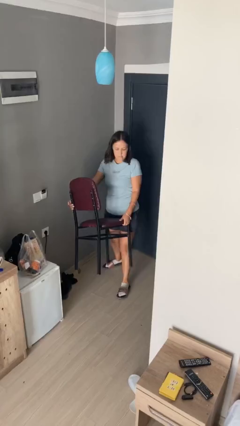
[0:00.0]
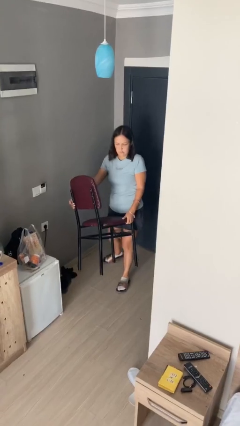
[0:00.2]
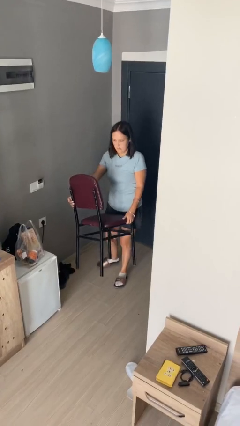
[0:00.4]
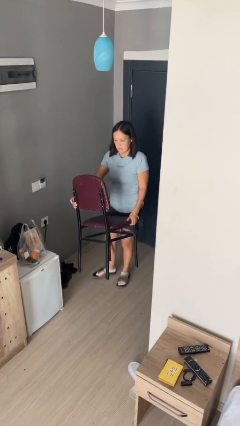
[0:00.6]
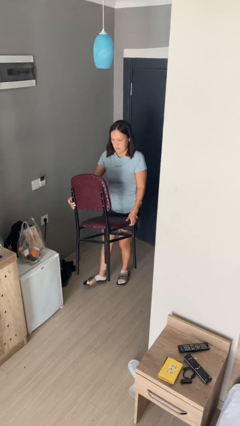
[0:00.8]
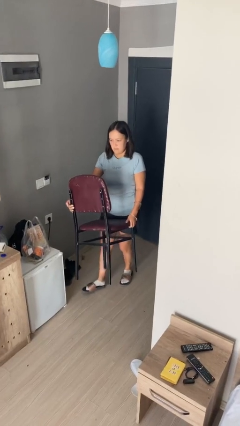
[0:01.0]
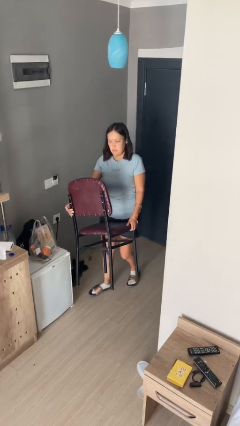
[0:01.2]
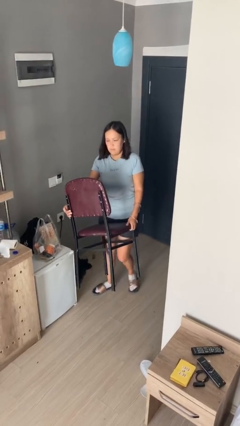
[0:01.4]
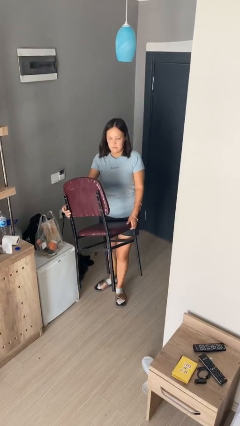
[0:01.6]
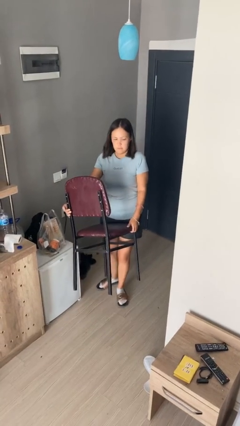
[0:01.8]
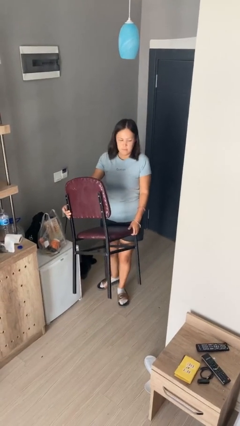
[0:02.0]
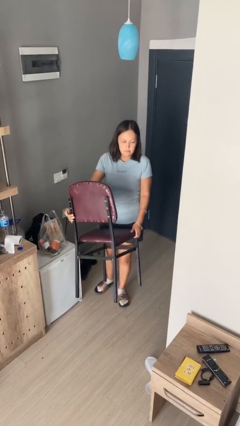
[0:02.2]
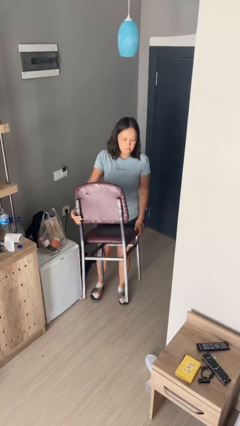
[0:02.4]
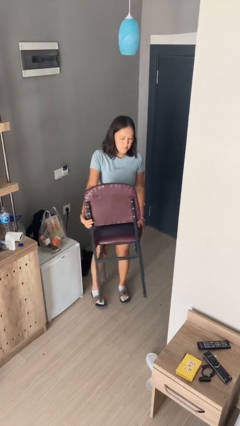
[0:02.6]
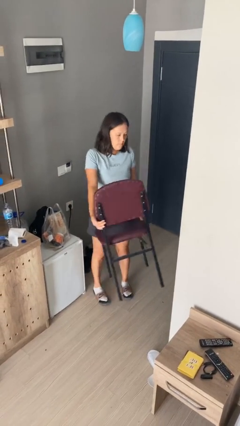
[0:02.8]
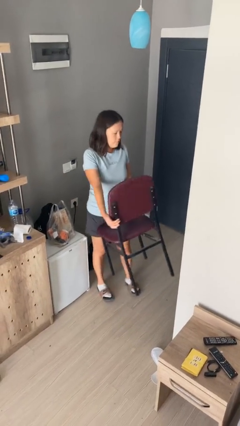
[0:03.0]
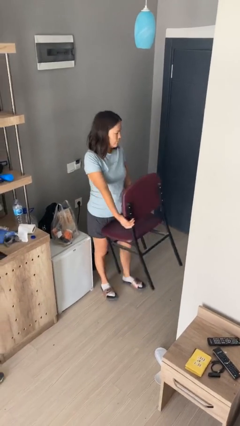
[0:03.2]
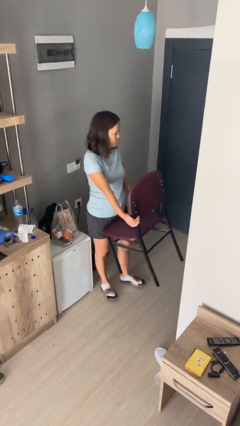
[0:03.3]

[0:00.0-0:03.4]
person carries furniture

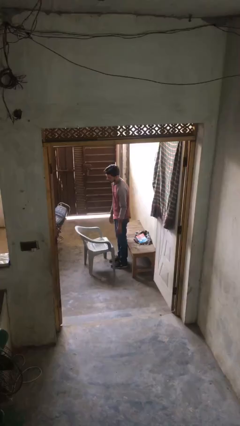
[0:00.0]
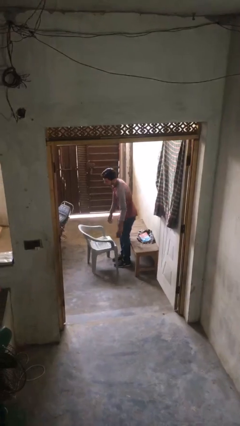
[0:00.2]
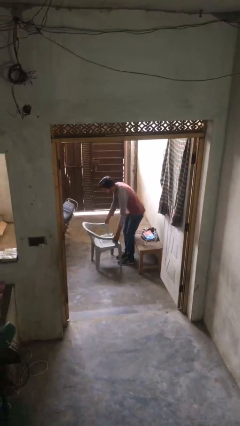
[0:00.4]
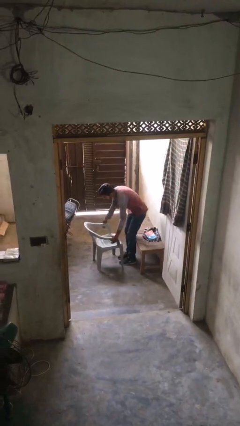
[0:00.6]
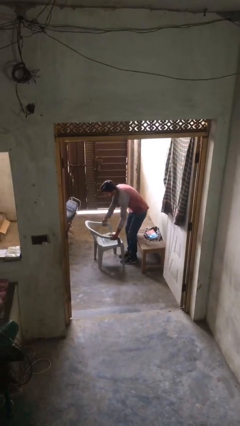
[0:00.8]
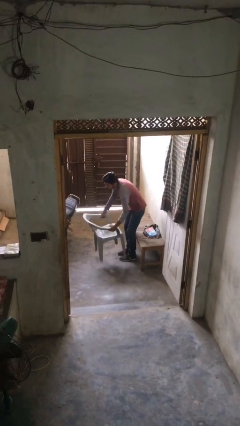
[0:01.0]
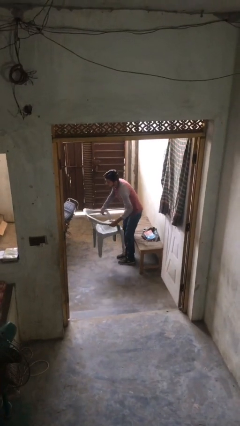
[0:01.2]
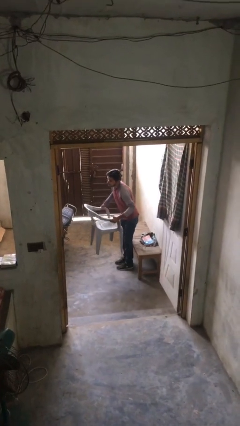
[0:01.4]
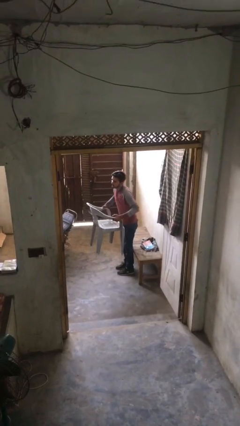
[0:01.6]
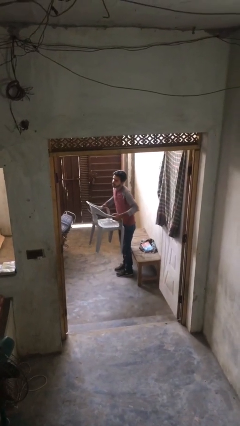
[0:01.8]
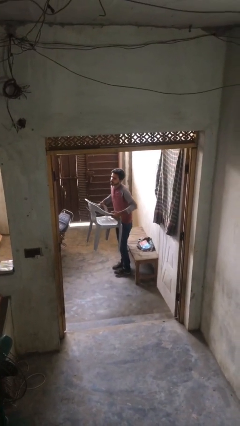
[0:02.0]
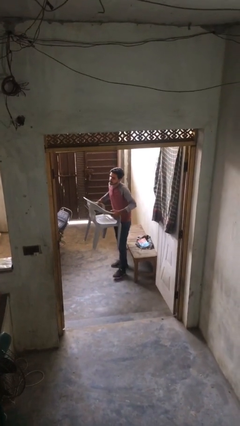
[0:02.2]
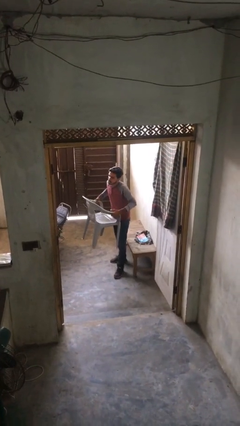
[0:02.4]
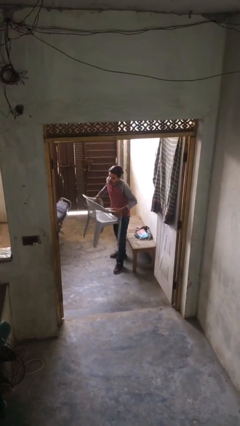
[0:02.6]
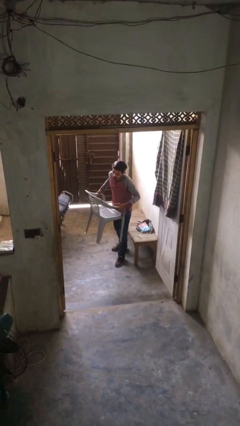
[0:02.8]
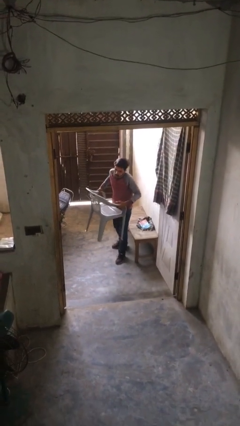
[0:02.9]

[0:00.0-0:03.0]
person picks up object from floor

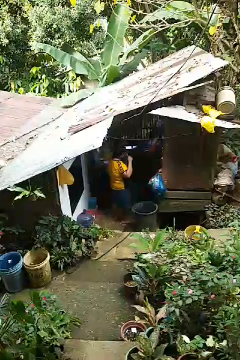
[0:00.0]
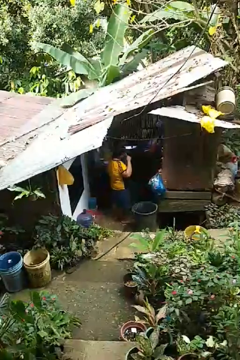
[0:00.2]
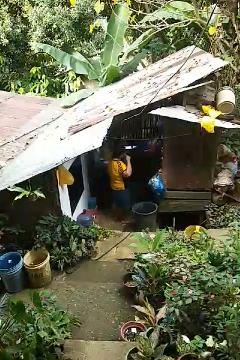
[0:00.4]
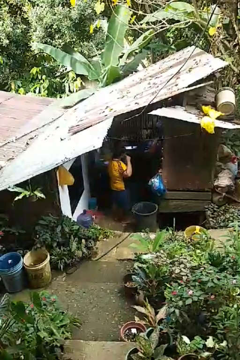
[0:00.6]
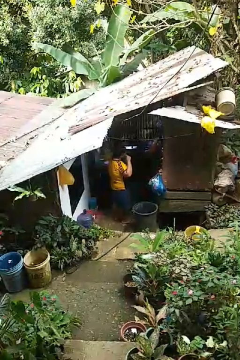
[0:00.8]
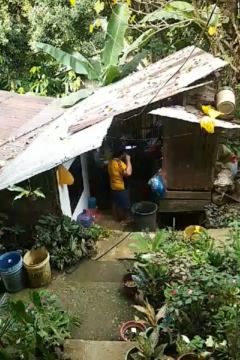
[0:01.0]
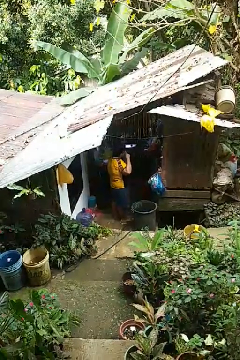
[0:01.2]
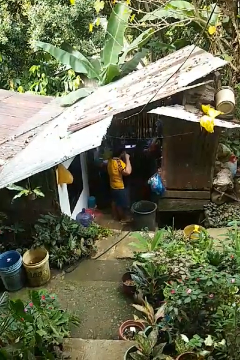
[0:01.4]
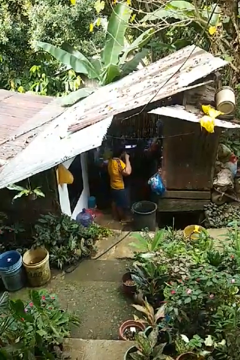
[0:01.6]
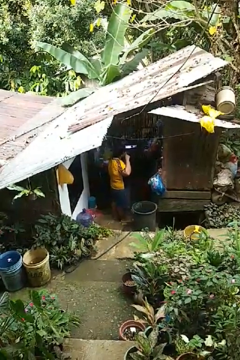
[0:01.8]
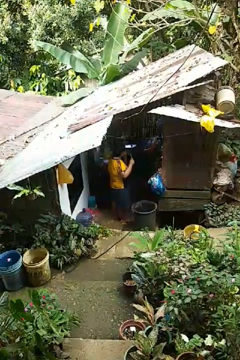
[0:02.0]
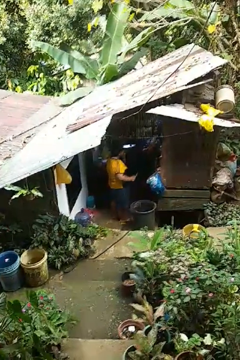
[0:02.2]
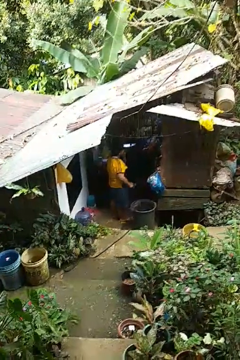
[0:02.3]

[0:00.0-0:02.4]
person brushes teeth

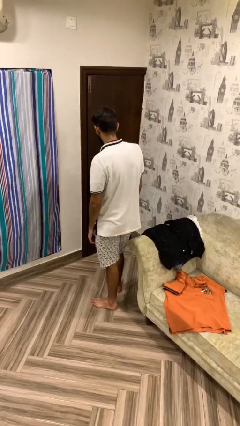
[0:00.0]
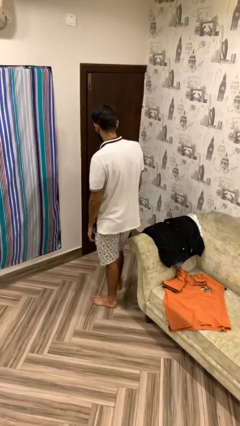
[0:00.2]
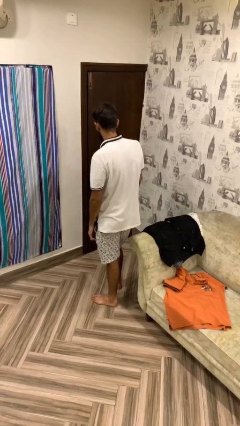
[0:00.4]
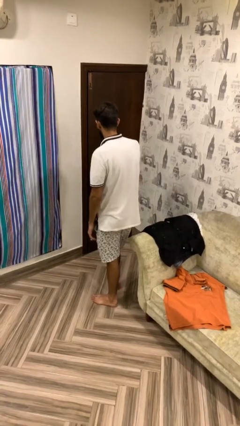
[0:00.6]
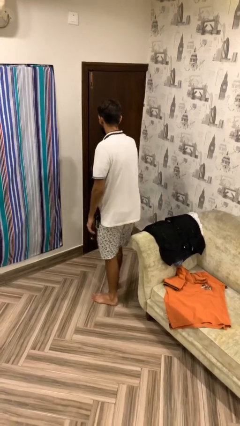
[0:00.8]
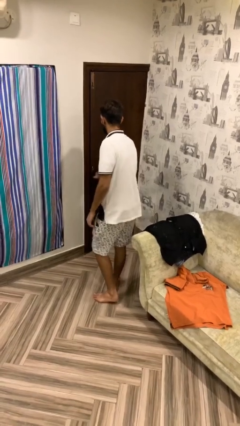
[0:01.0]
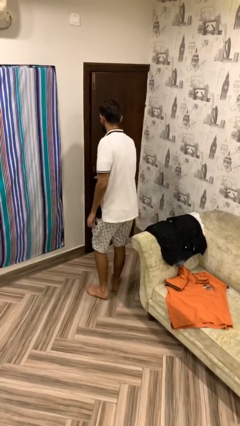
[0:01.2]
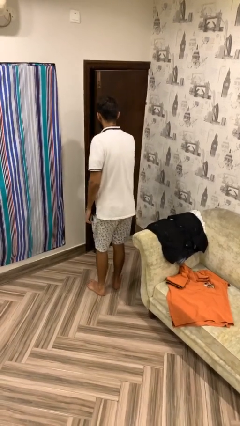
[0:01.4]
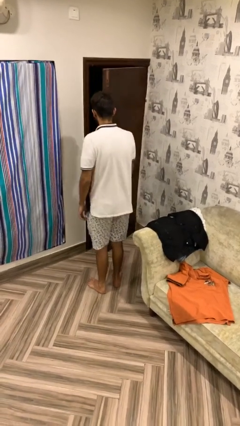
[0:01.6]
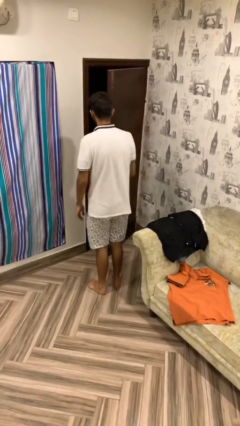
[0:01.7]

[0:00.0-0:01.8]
person opens facility door

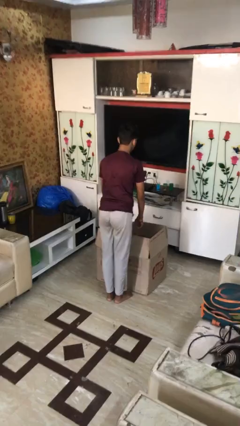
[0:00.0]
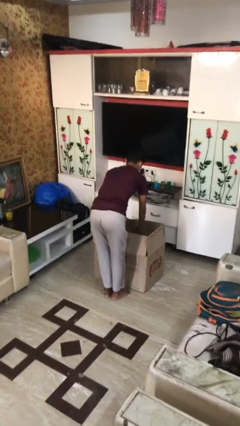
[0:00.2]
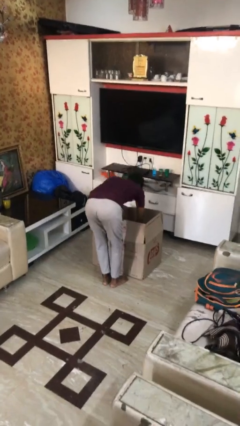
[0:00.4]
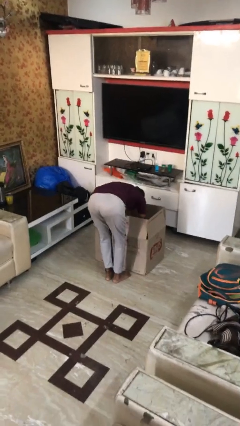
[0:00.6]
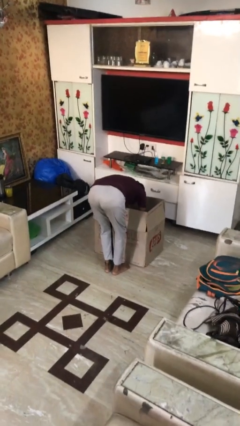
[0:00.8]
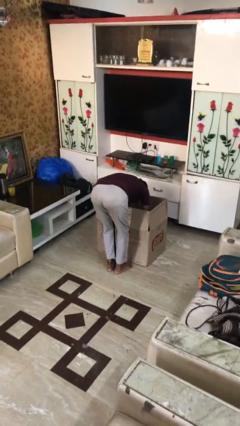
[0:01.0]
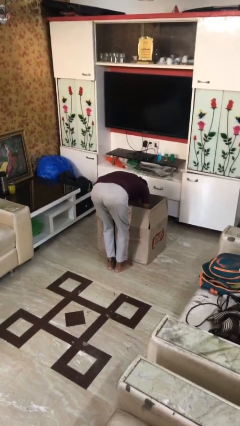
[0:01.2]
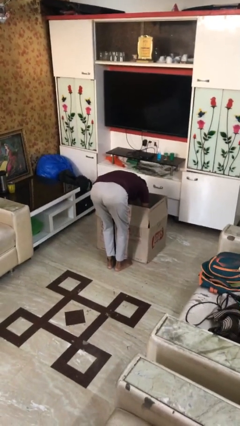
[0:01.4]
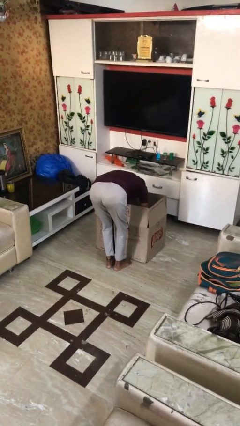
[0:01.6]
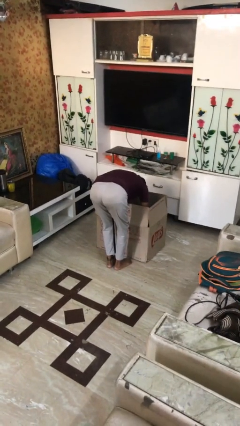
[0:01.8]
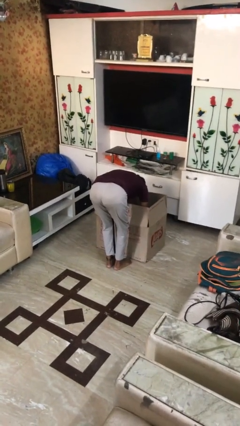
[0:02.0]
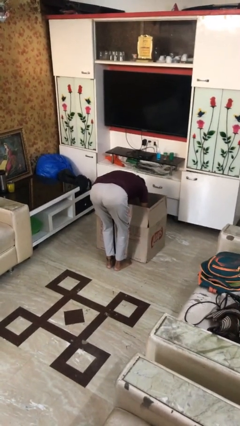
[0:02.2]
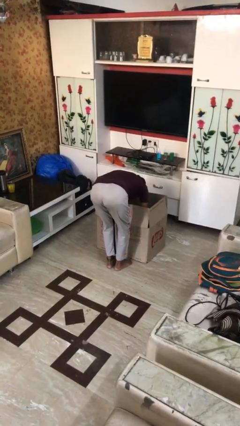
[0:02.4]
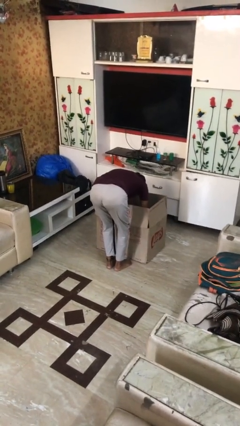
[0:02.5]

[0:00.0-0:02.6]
person searches in box

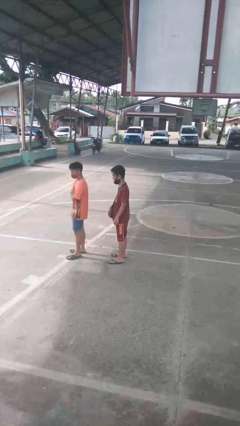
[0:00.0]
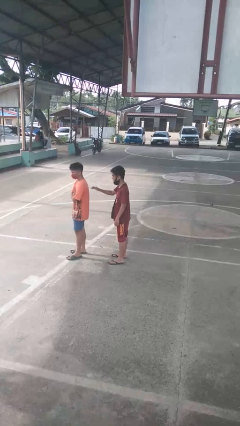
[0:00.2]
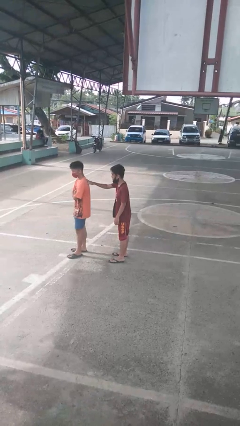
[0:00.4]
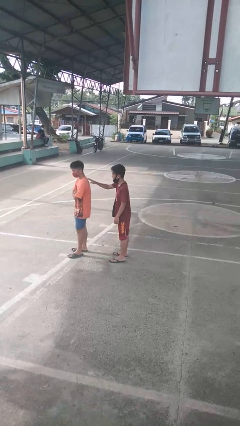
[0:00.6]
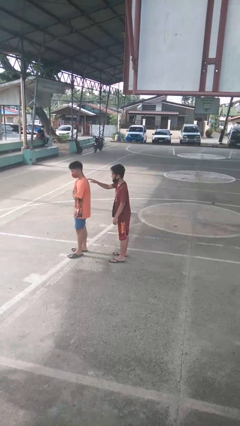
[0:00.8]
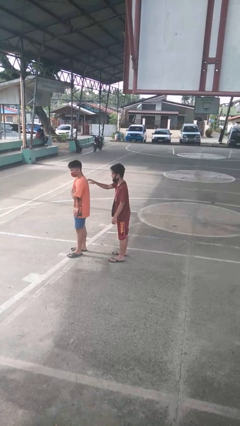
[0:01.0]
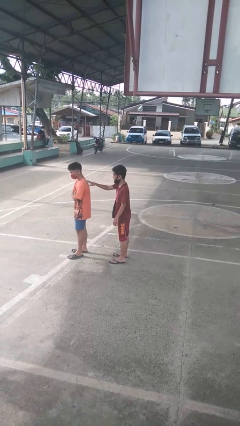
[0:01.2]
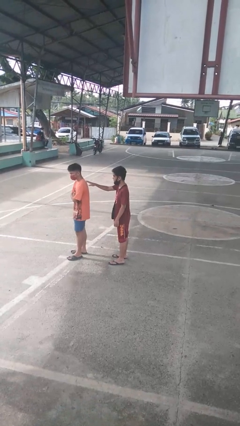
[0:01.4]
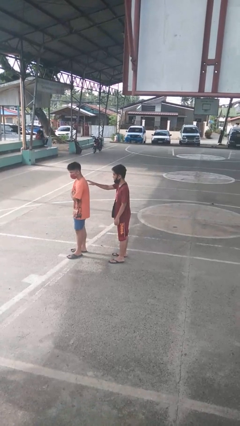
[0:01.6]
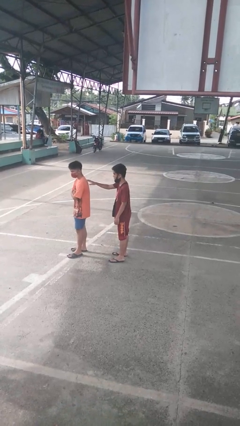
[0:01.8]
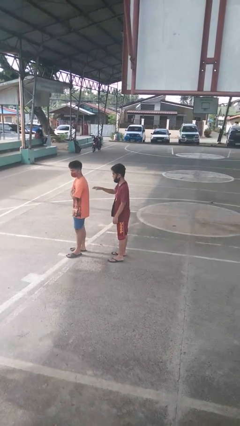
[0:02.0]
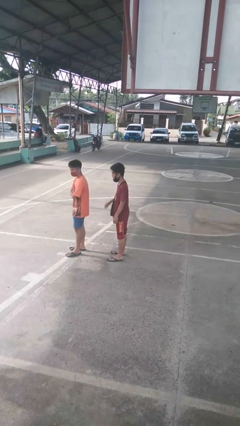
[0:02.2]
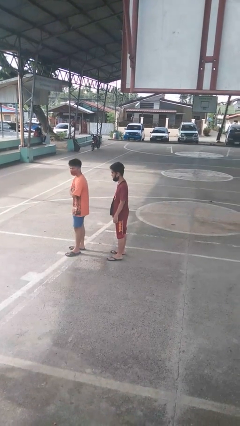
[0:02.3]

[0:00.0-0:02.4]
person touches back of person

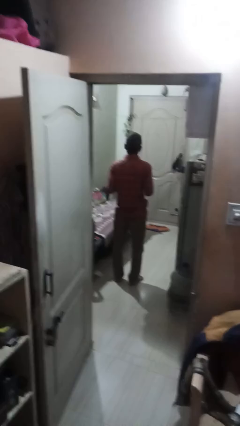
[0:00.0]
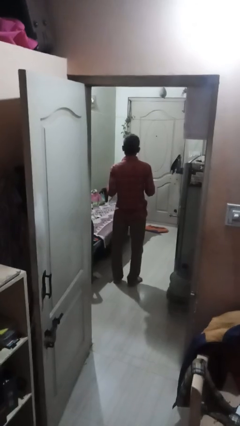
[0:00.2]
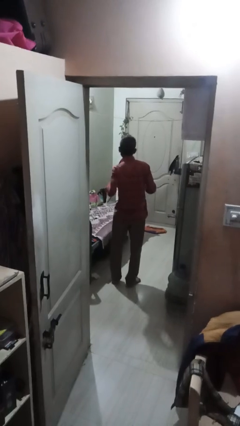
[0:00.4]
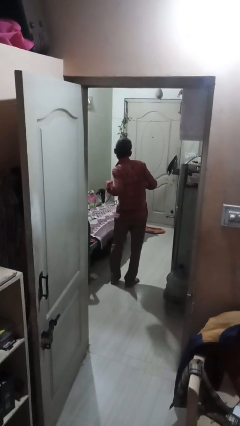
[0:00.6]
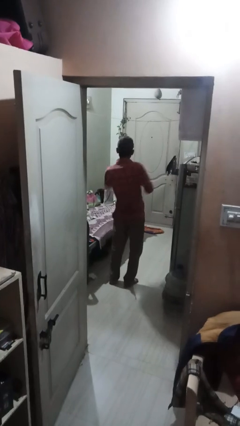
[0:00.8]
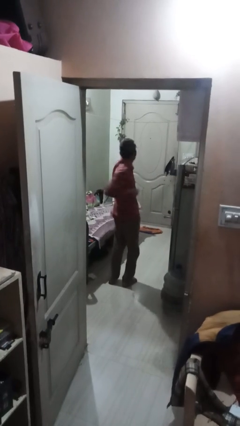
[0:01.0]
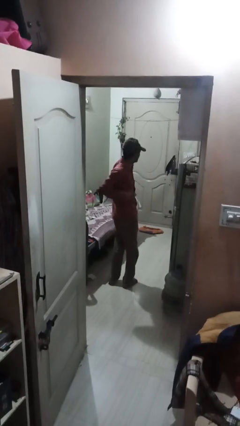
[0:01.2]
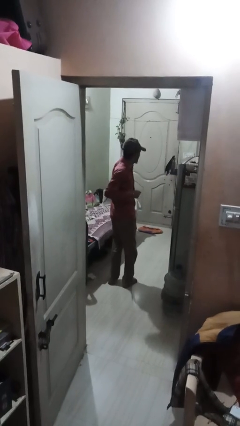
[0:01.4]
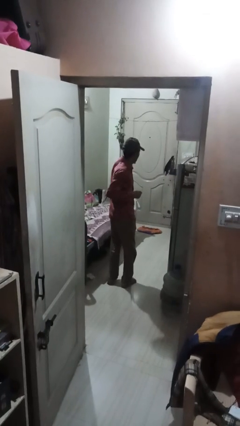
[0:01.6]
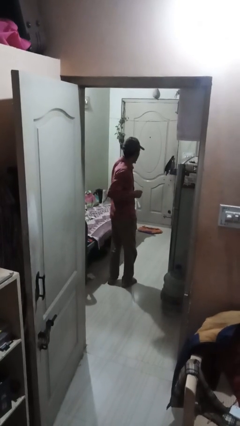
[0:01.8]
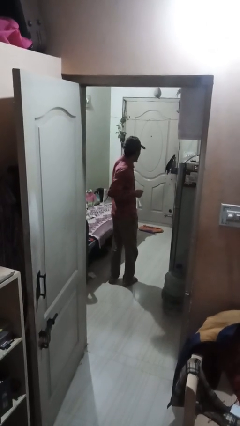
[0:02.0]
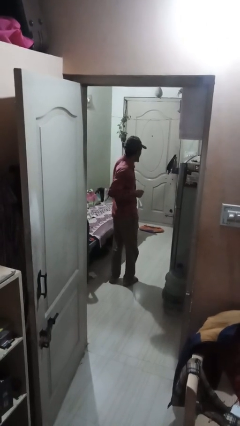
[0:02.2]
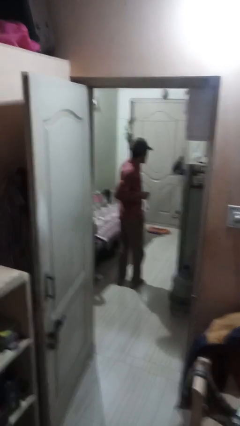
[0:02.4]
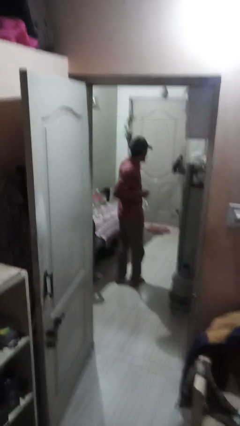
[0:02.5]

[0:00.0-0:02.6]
person punches
